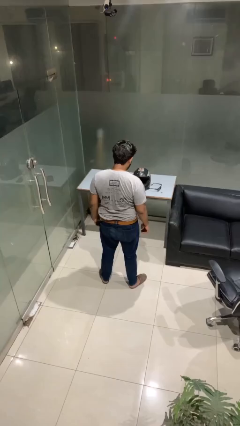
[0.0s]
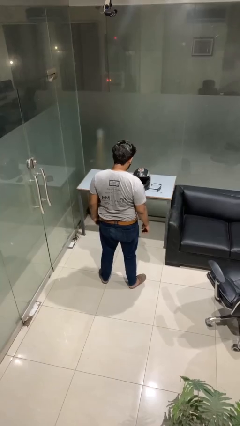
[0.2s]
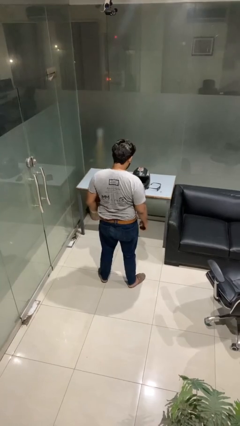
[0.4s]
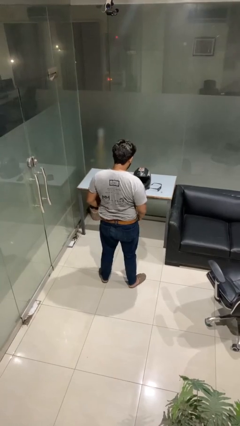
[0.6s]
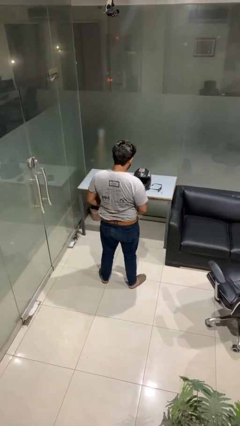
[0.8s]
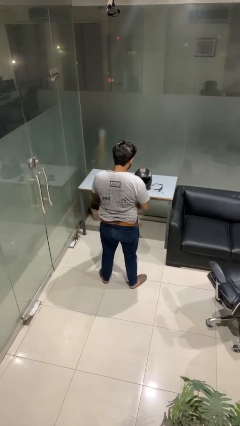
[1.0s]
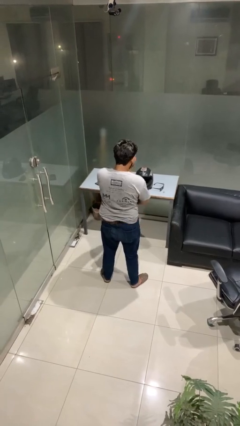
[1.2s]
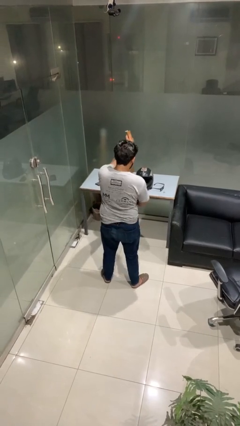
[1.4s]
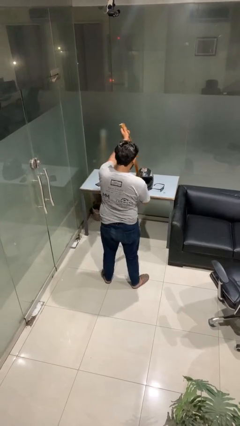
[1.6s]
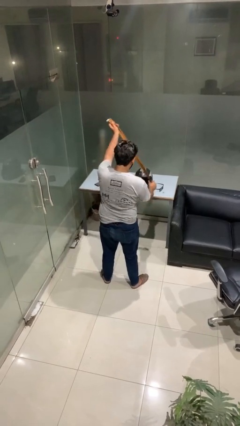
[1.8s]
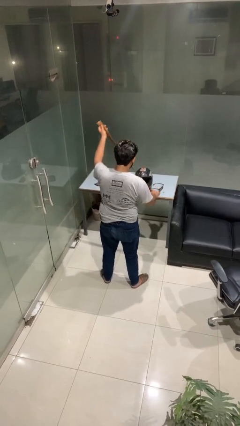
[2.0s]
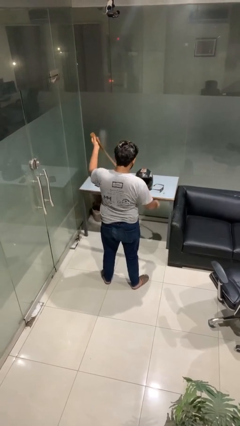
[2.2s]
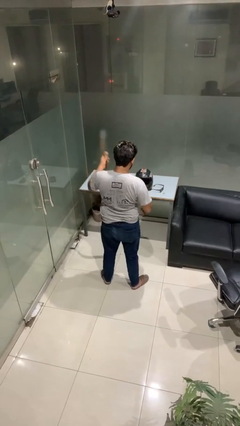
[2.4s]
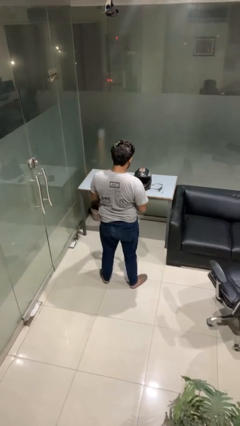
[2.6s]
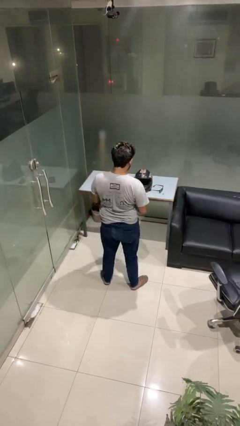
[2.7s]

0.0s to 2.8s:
person takes off belt

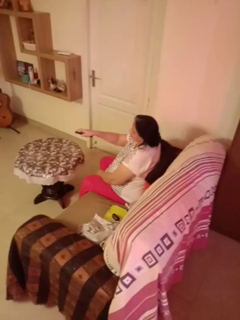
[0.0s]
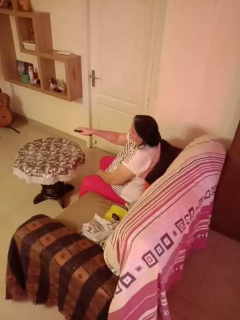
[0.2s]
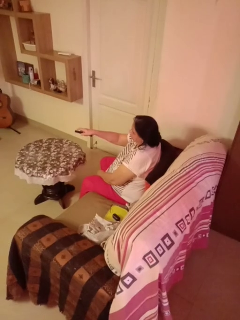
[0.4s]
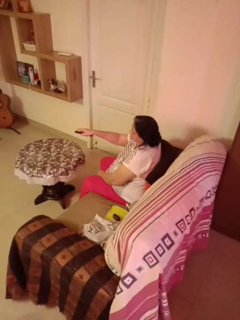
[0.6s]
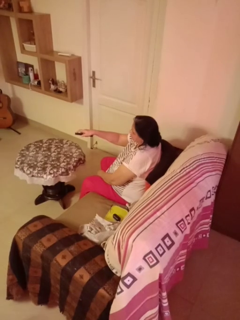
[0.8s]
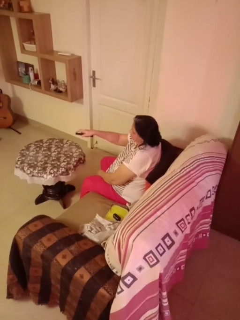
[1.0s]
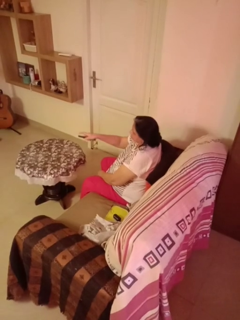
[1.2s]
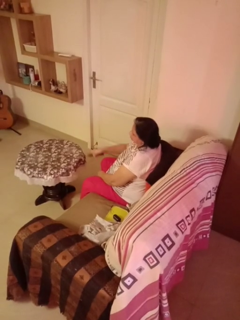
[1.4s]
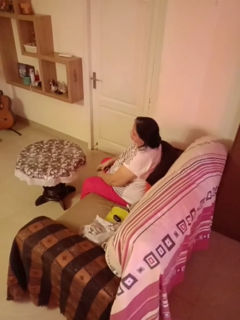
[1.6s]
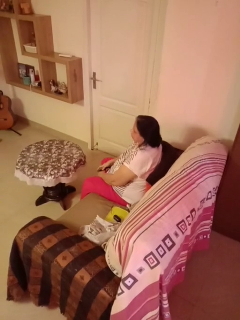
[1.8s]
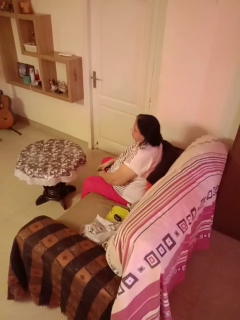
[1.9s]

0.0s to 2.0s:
person uses television remote

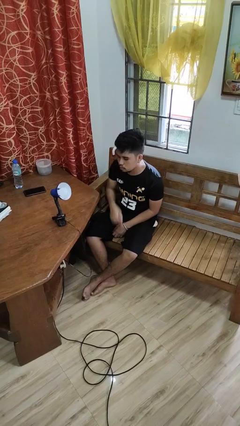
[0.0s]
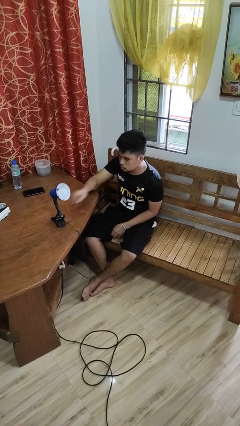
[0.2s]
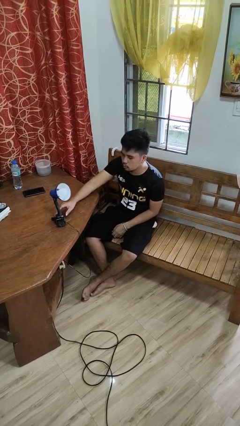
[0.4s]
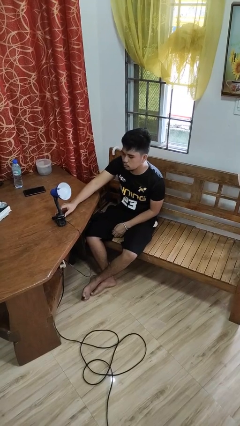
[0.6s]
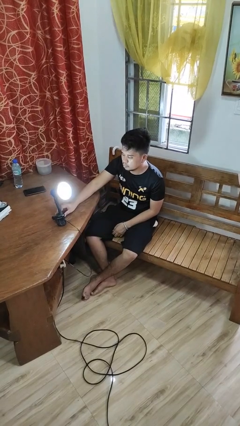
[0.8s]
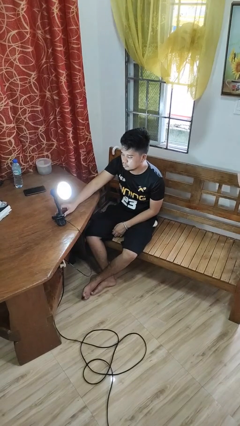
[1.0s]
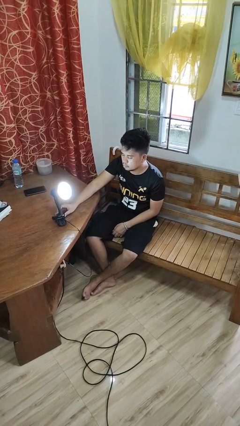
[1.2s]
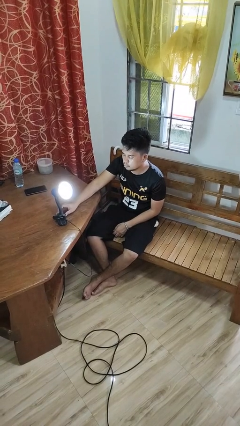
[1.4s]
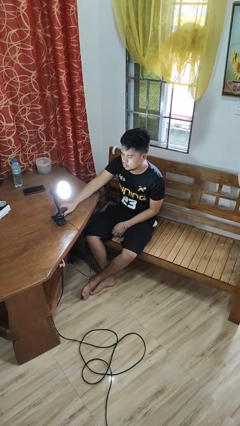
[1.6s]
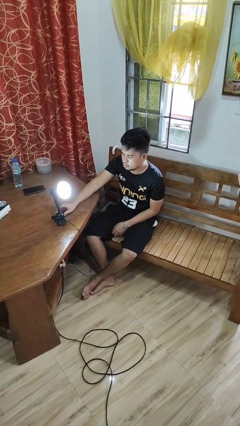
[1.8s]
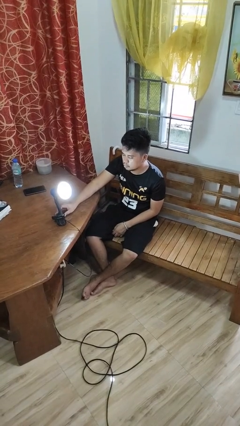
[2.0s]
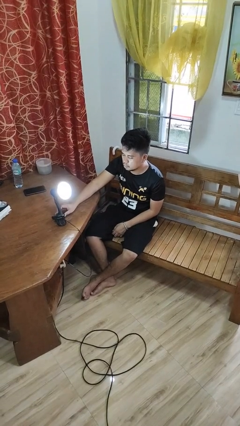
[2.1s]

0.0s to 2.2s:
person turns on lamp

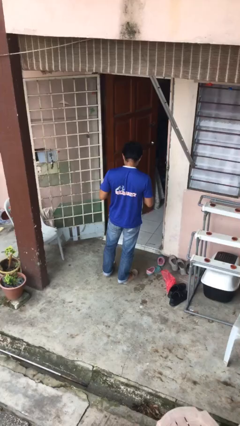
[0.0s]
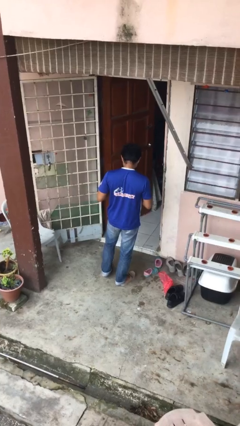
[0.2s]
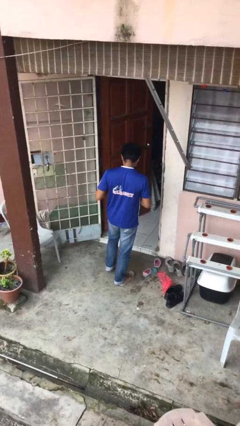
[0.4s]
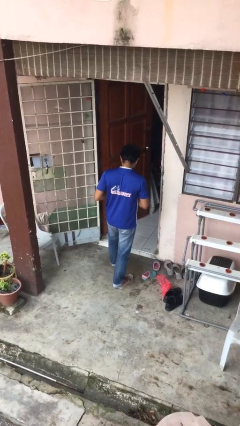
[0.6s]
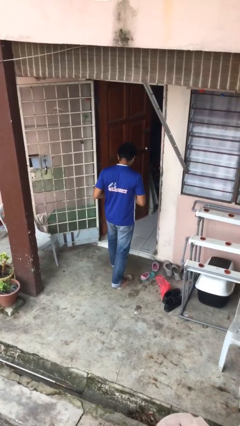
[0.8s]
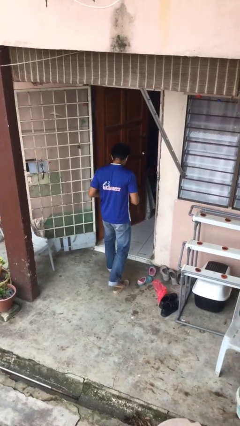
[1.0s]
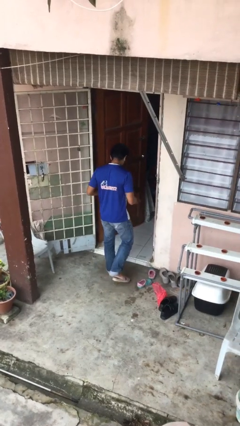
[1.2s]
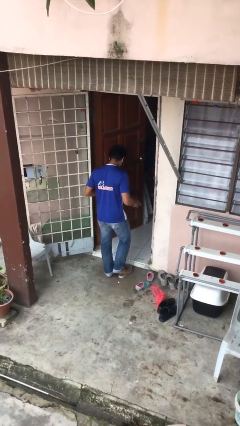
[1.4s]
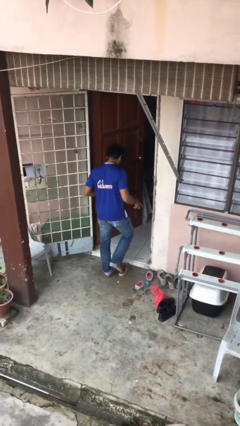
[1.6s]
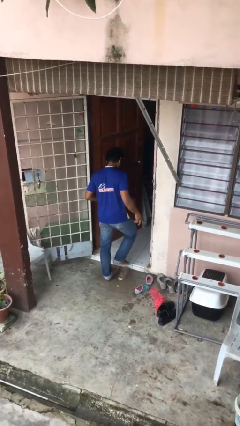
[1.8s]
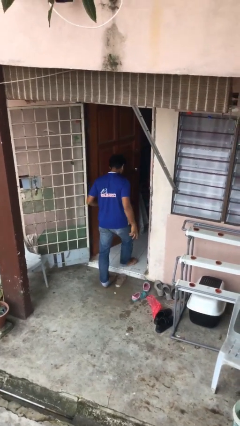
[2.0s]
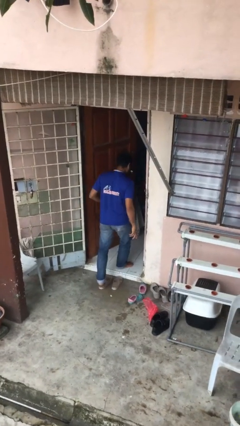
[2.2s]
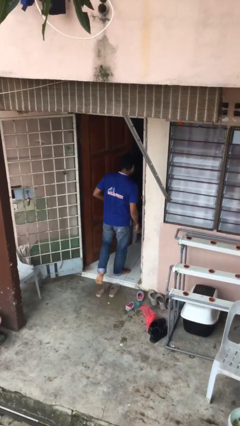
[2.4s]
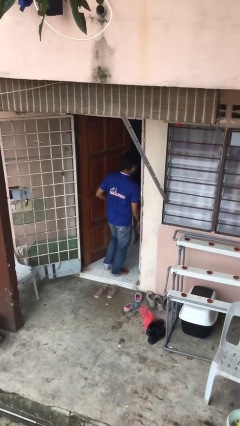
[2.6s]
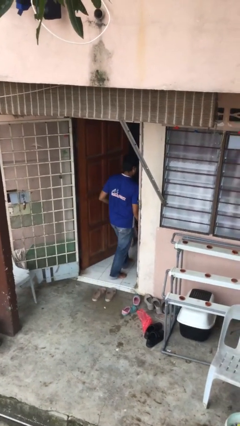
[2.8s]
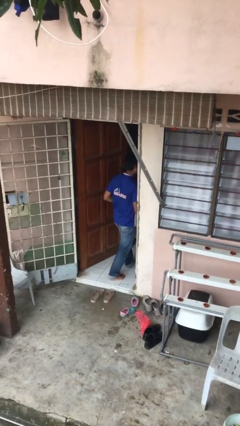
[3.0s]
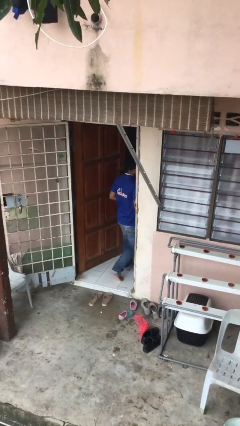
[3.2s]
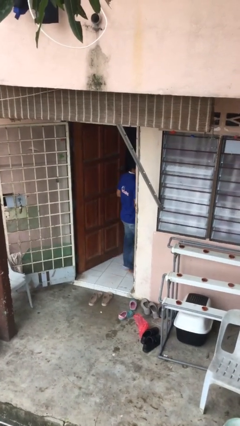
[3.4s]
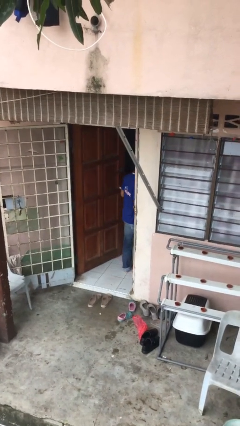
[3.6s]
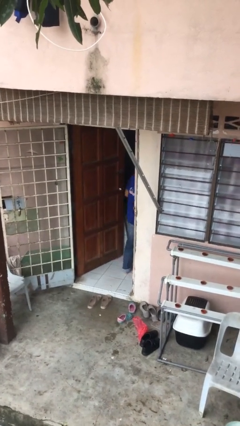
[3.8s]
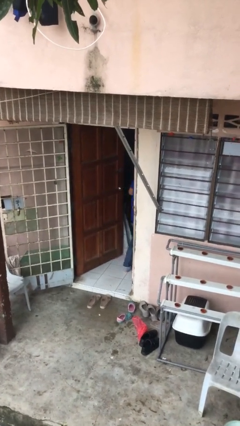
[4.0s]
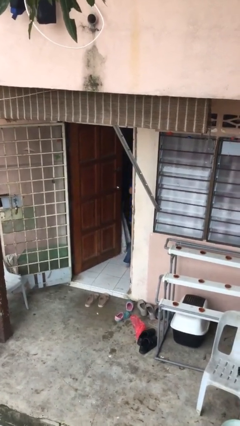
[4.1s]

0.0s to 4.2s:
person exits scene through structure

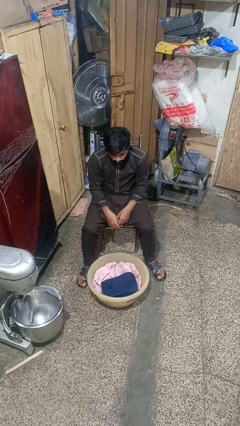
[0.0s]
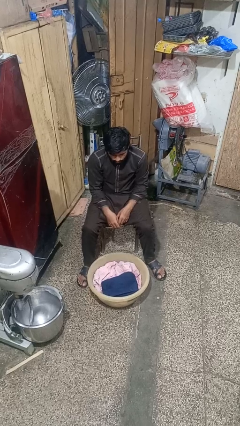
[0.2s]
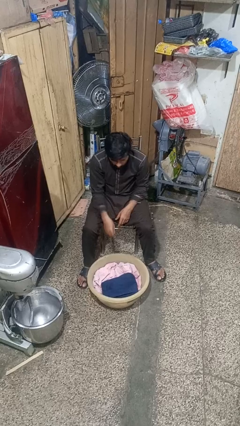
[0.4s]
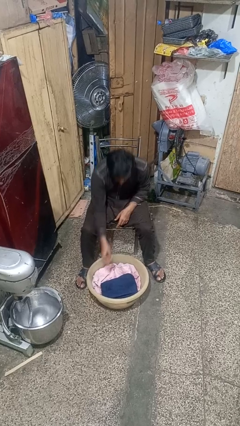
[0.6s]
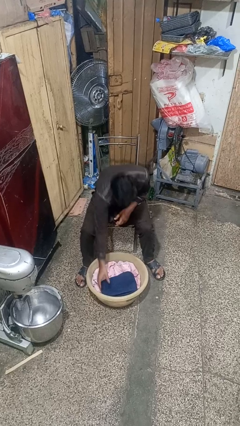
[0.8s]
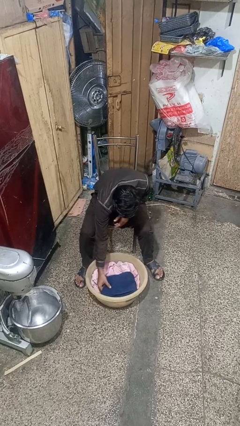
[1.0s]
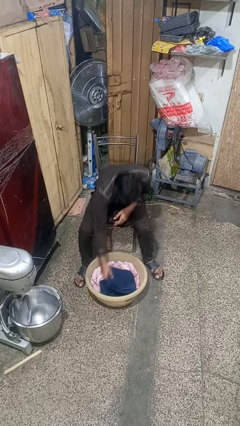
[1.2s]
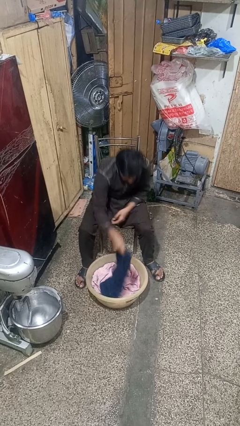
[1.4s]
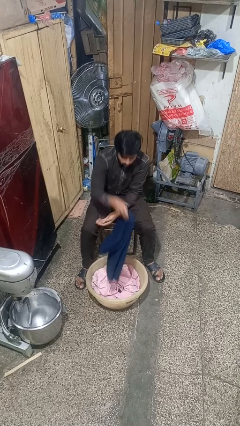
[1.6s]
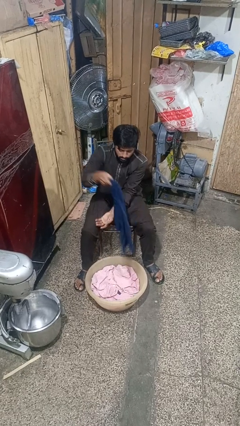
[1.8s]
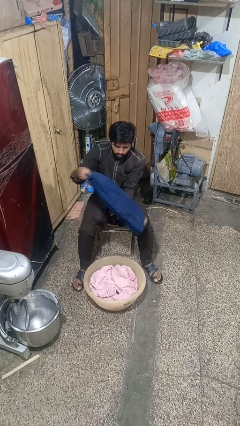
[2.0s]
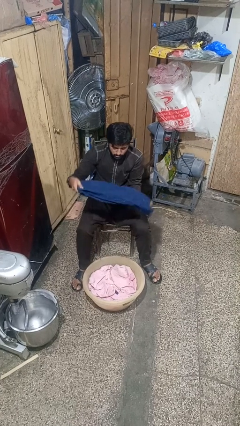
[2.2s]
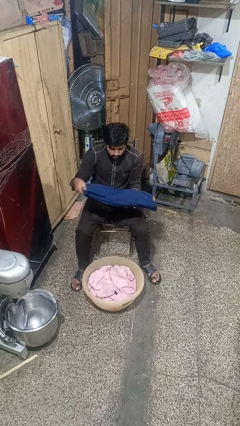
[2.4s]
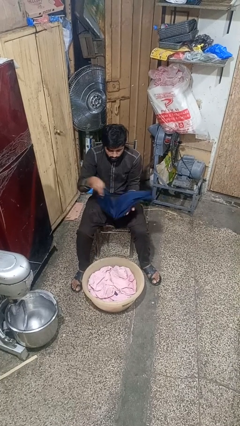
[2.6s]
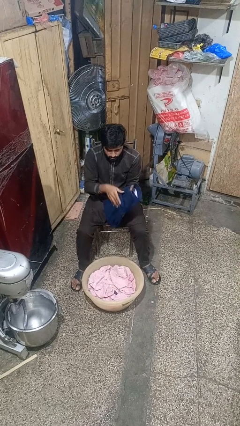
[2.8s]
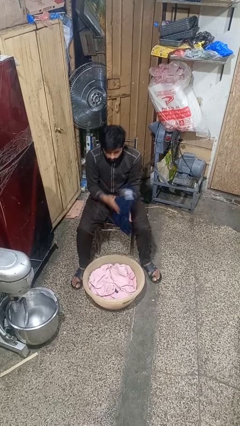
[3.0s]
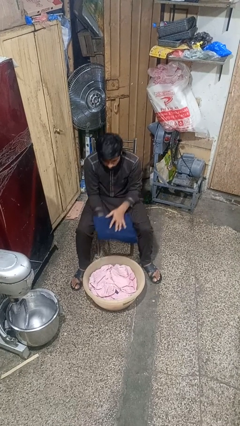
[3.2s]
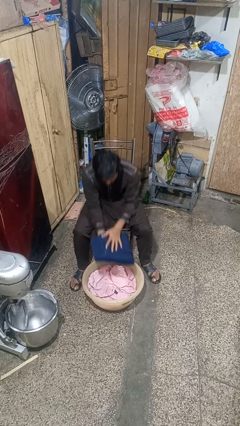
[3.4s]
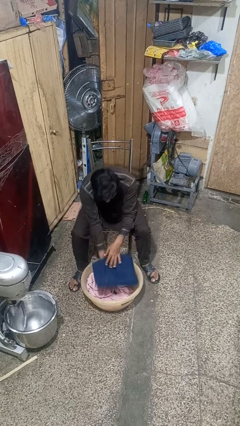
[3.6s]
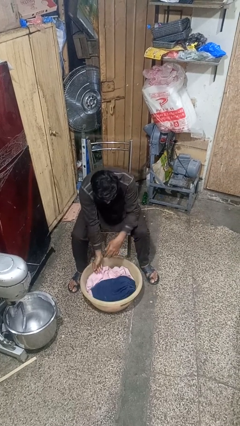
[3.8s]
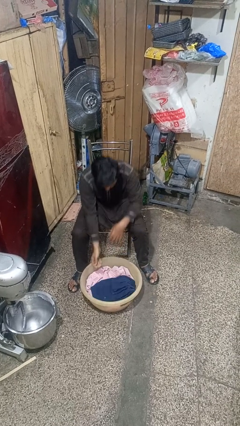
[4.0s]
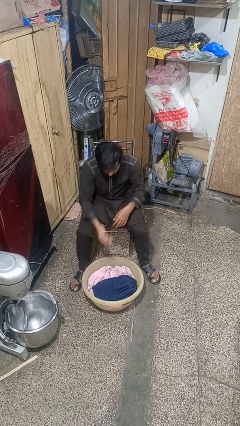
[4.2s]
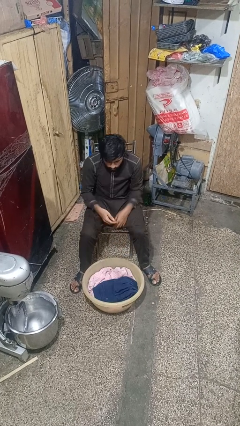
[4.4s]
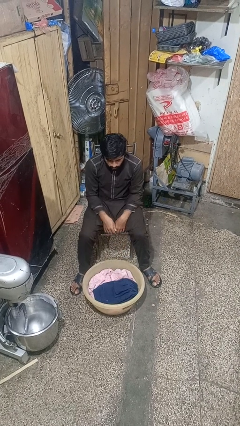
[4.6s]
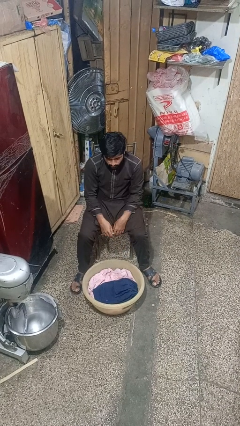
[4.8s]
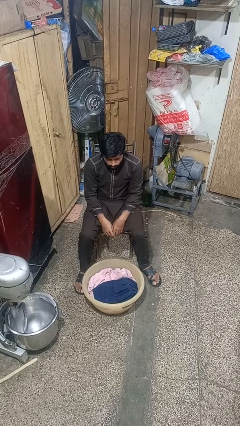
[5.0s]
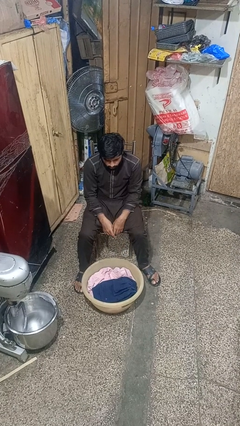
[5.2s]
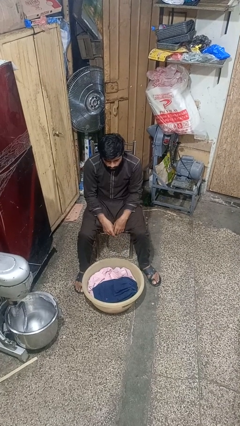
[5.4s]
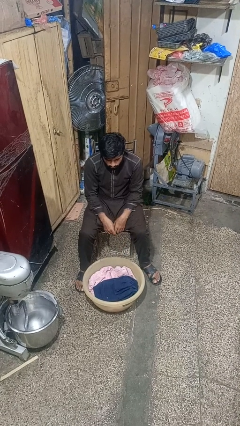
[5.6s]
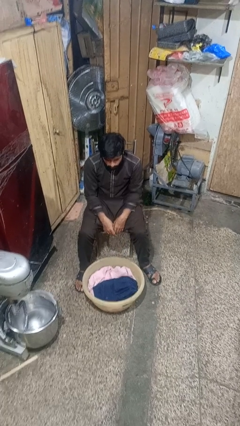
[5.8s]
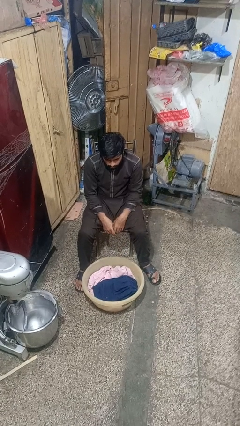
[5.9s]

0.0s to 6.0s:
person folds pants

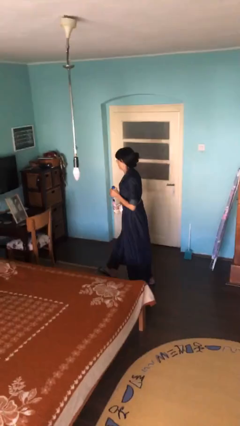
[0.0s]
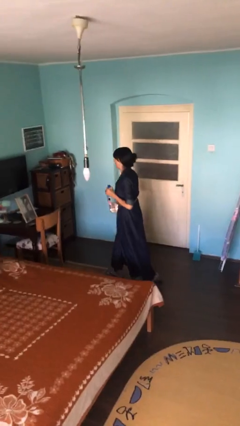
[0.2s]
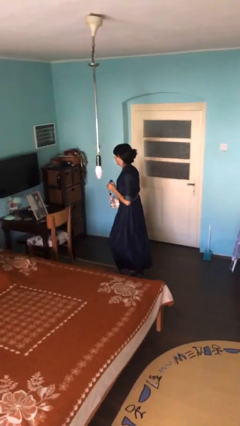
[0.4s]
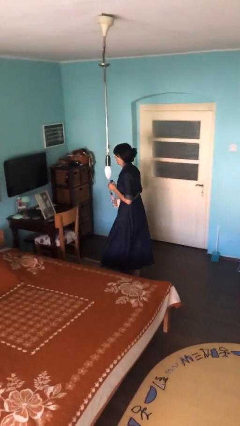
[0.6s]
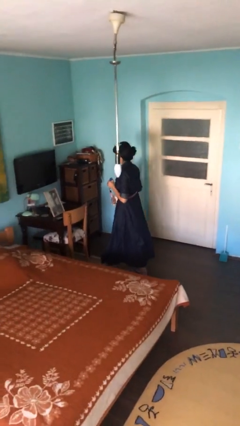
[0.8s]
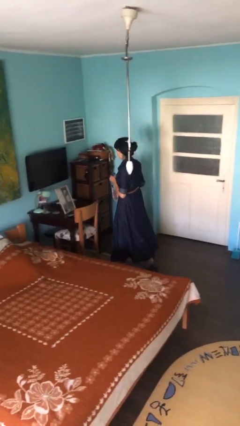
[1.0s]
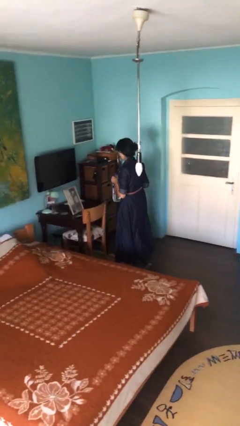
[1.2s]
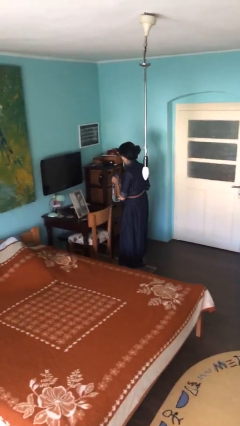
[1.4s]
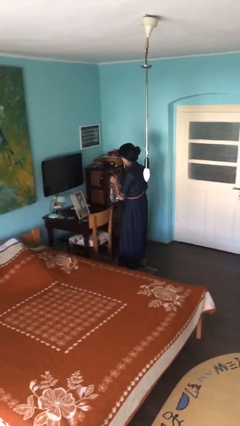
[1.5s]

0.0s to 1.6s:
person puts down object on table
